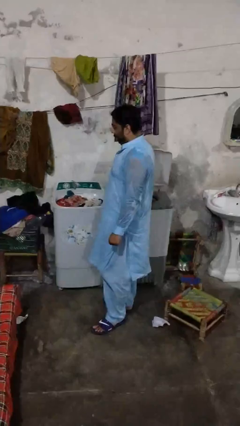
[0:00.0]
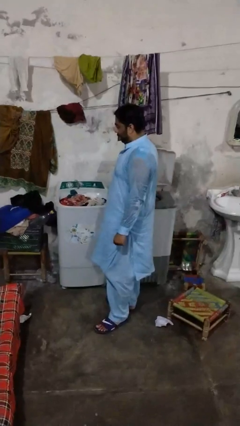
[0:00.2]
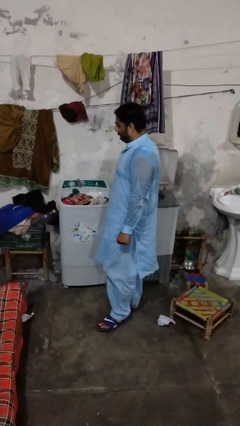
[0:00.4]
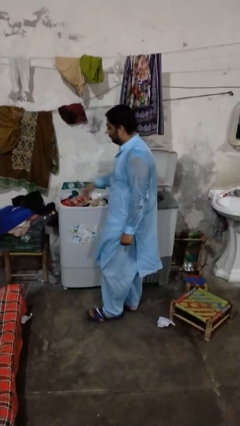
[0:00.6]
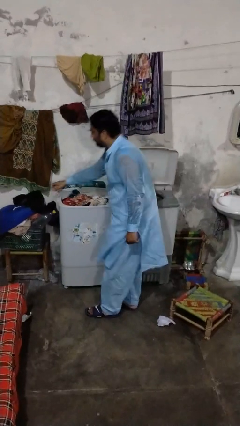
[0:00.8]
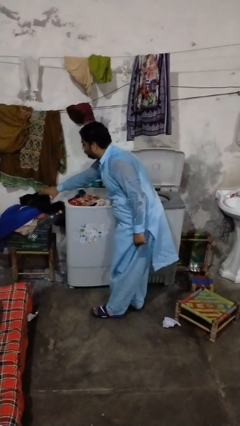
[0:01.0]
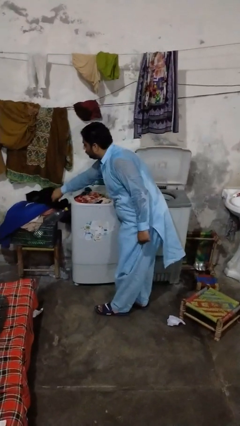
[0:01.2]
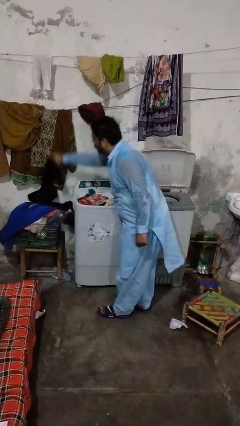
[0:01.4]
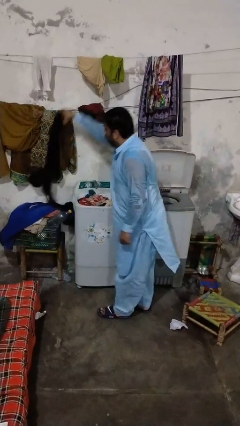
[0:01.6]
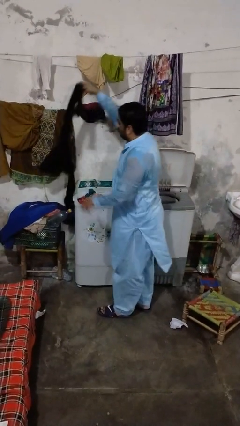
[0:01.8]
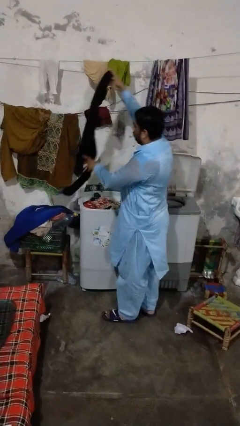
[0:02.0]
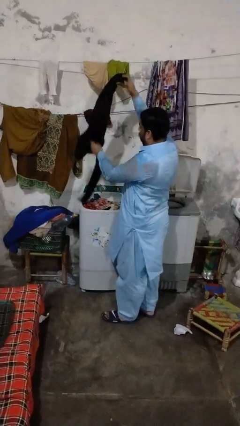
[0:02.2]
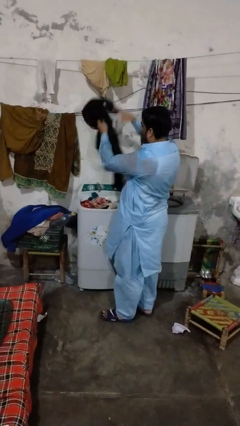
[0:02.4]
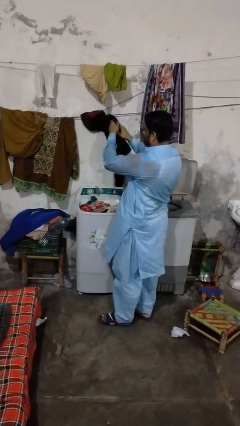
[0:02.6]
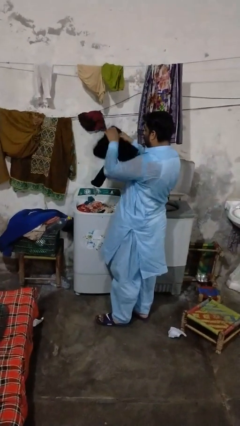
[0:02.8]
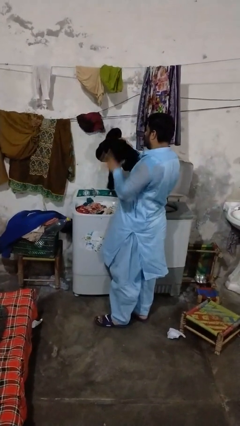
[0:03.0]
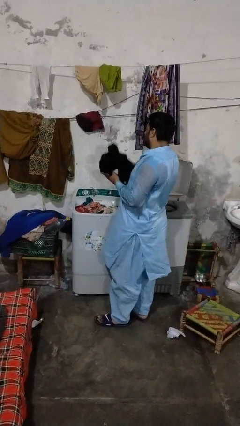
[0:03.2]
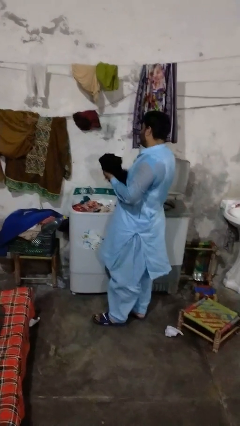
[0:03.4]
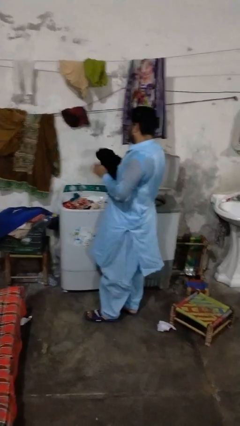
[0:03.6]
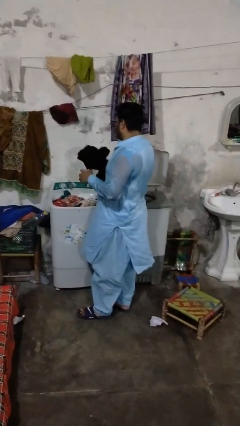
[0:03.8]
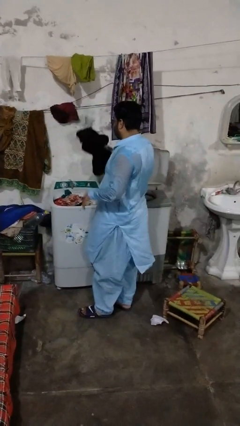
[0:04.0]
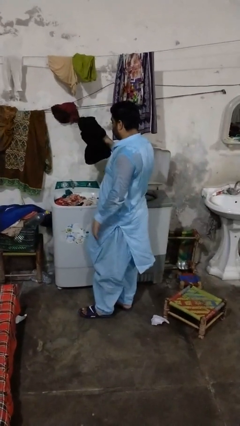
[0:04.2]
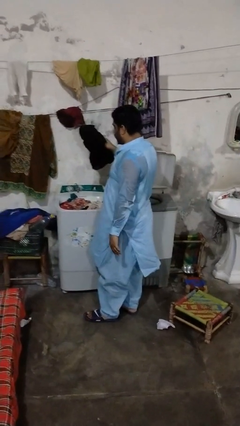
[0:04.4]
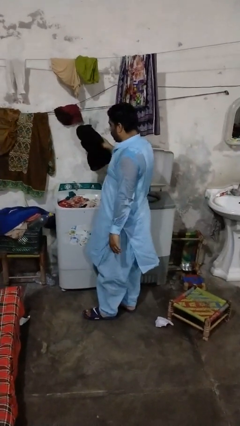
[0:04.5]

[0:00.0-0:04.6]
person loads clotheswasher

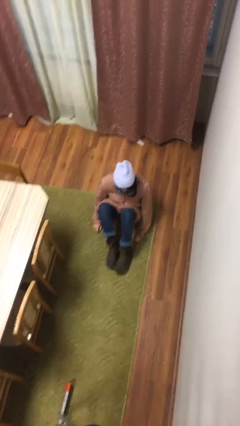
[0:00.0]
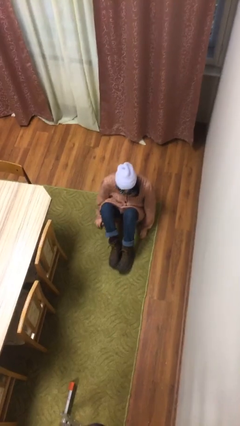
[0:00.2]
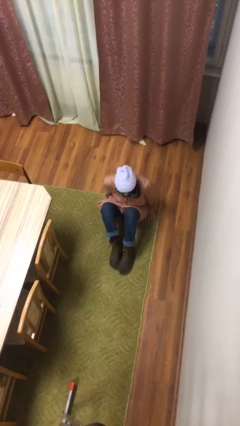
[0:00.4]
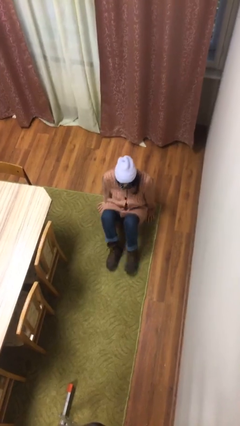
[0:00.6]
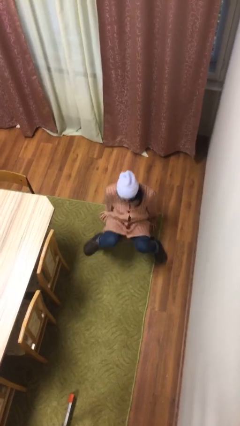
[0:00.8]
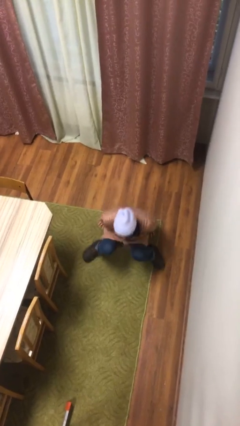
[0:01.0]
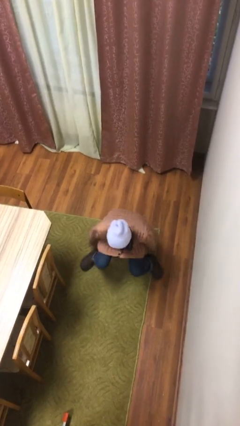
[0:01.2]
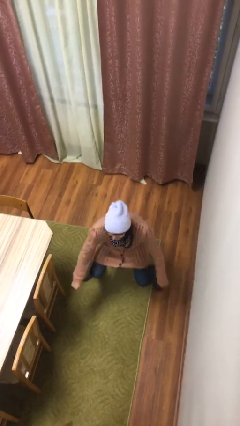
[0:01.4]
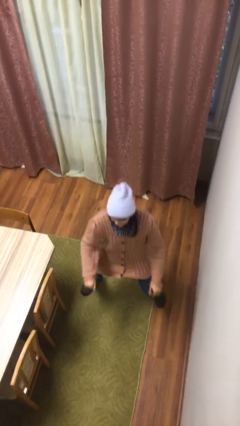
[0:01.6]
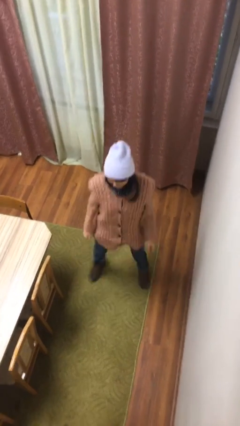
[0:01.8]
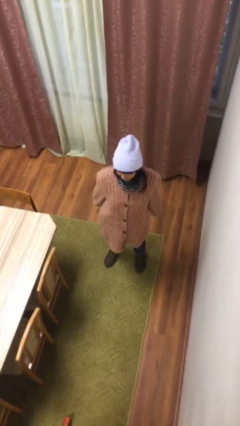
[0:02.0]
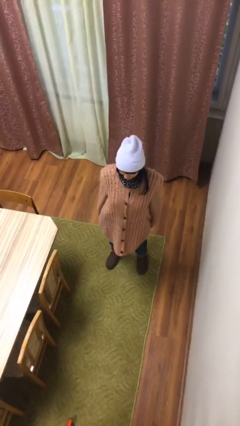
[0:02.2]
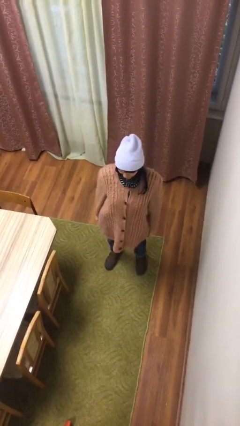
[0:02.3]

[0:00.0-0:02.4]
person stands up

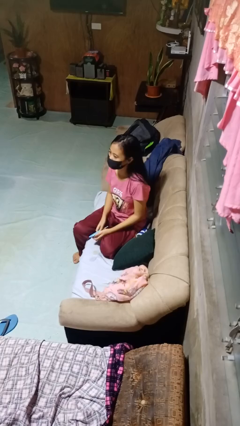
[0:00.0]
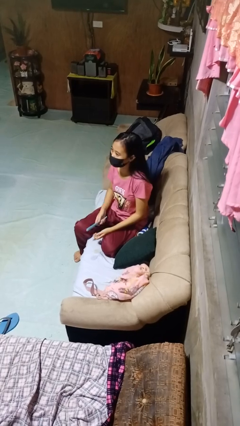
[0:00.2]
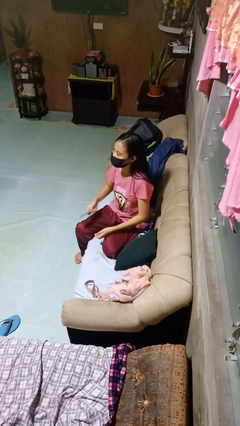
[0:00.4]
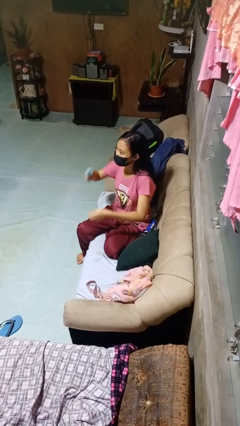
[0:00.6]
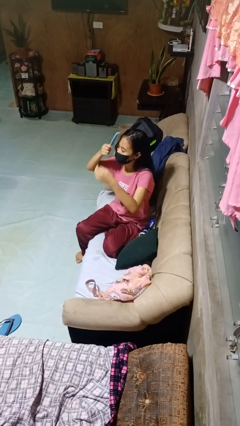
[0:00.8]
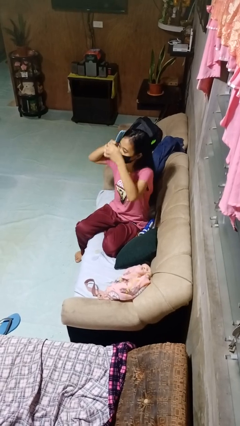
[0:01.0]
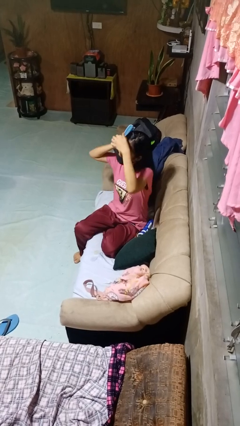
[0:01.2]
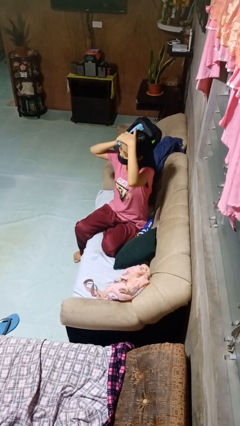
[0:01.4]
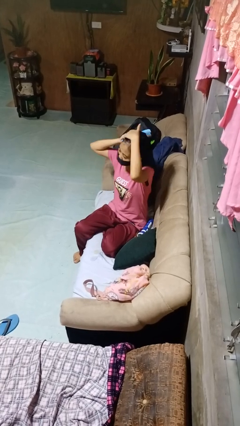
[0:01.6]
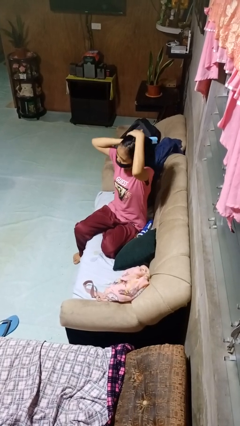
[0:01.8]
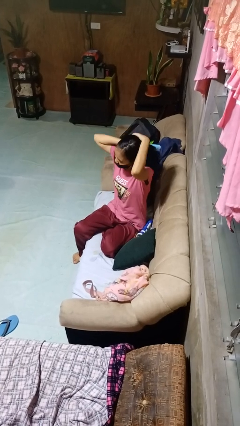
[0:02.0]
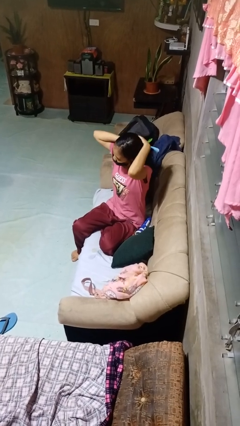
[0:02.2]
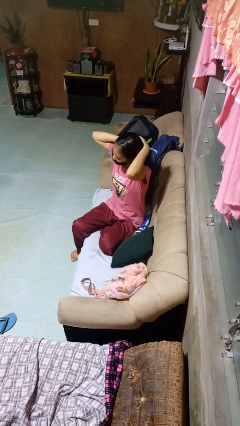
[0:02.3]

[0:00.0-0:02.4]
person brushes hair

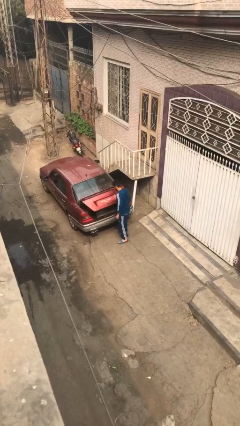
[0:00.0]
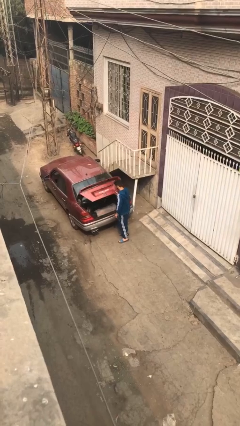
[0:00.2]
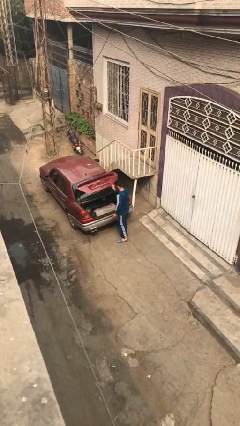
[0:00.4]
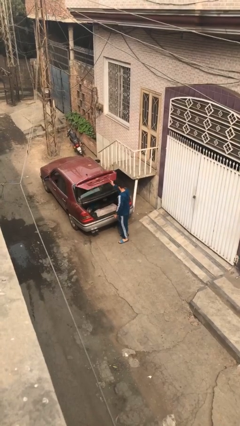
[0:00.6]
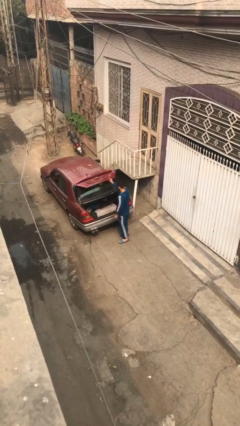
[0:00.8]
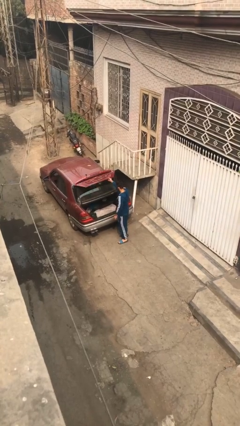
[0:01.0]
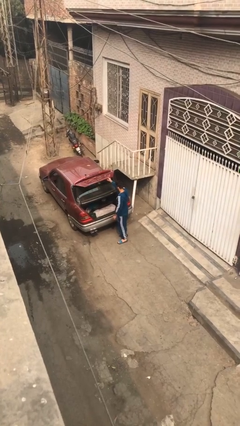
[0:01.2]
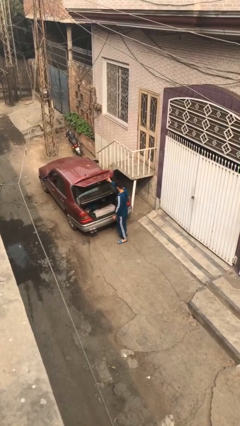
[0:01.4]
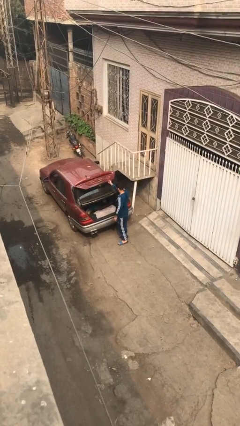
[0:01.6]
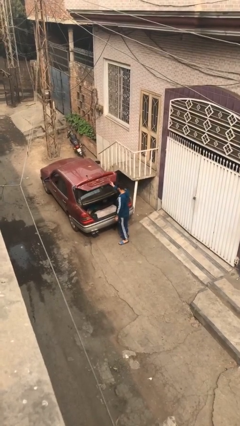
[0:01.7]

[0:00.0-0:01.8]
person opens car trunk

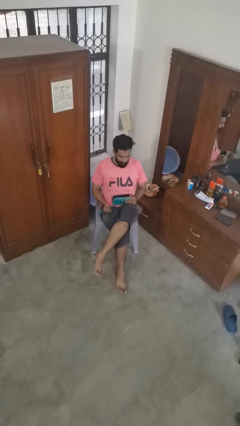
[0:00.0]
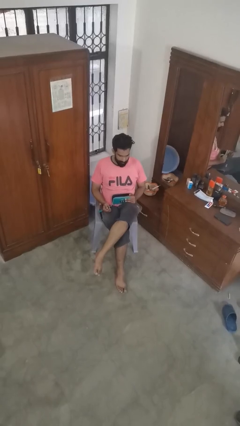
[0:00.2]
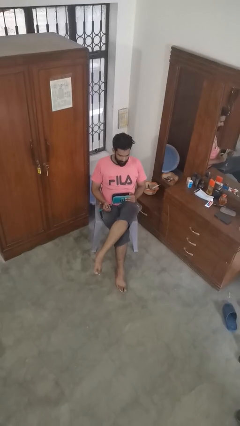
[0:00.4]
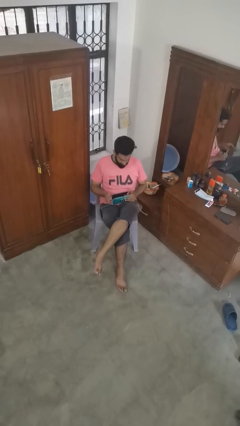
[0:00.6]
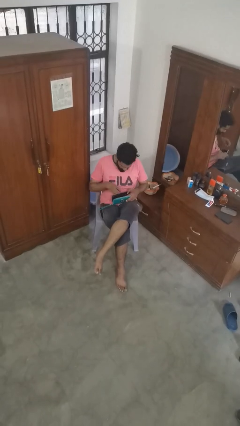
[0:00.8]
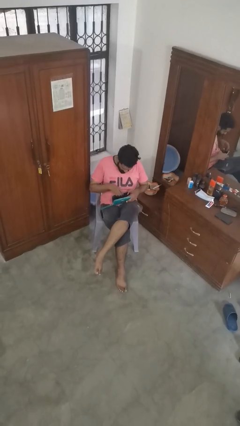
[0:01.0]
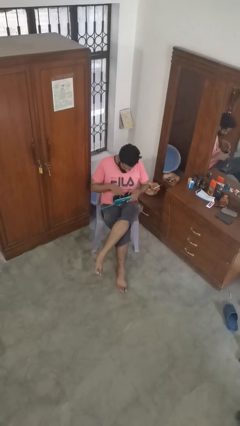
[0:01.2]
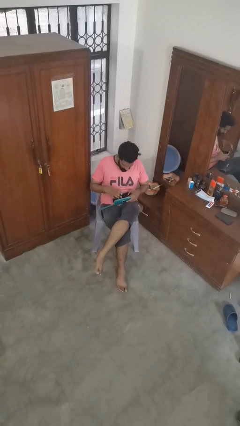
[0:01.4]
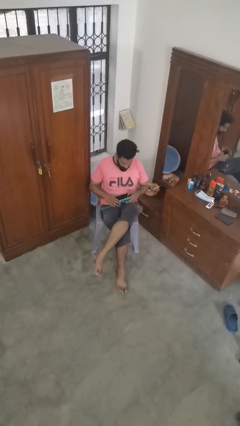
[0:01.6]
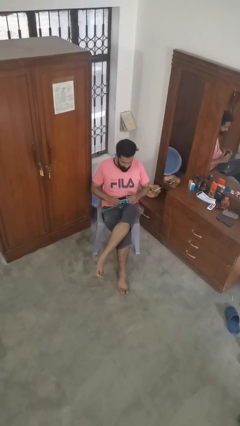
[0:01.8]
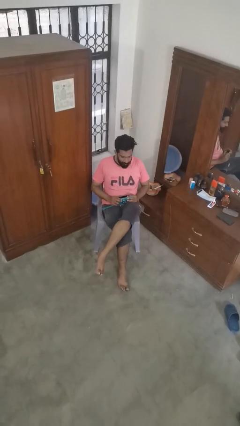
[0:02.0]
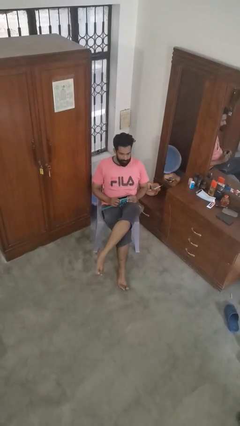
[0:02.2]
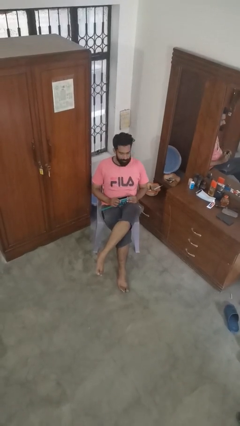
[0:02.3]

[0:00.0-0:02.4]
person puts object into purse

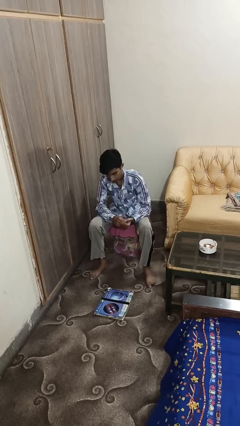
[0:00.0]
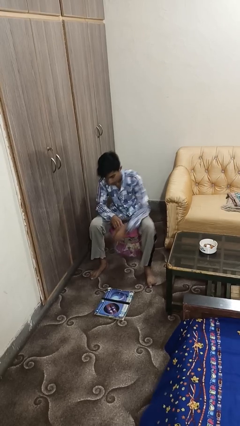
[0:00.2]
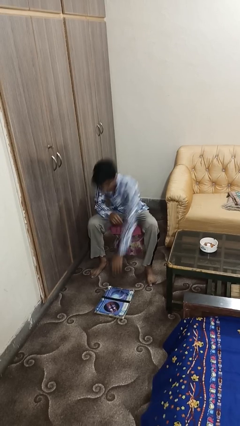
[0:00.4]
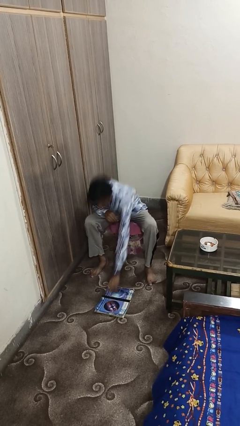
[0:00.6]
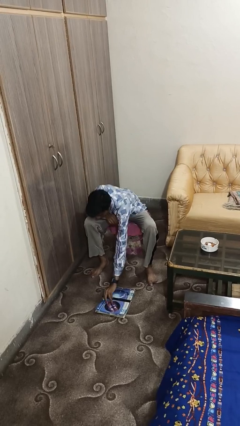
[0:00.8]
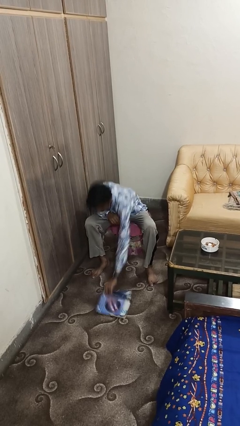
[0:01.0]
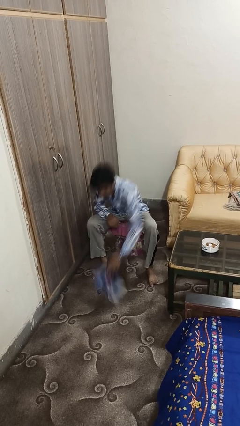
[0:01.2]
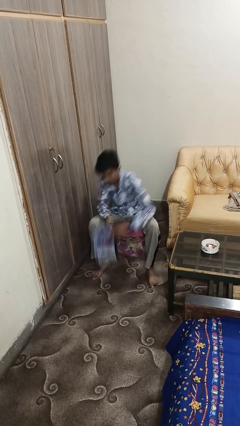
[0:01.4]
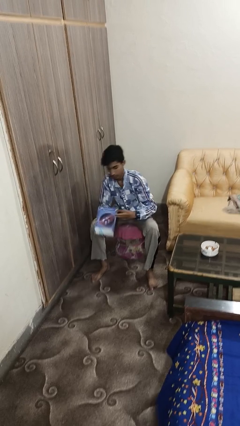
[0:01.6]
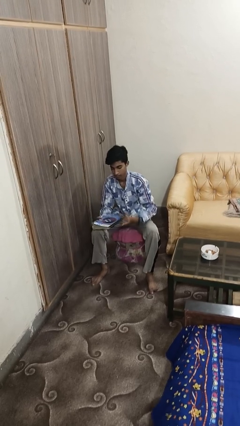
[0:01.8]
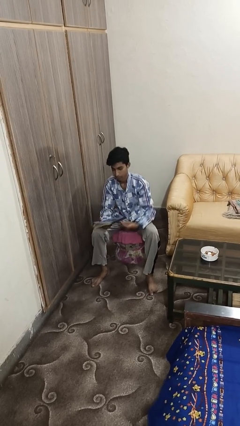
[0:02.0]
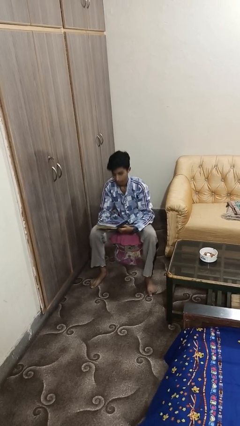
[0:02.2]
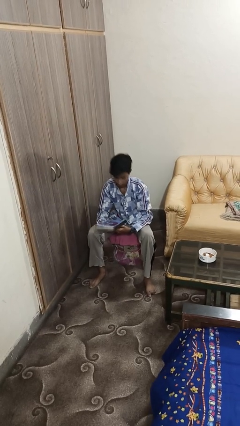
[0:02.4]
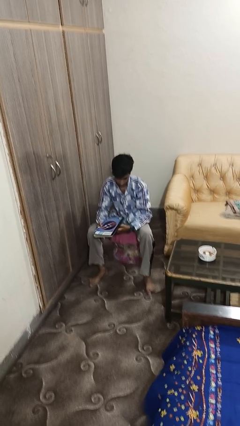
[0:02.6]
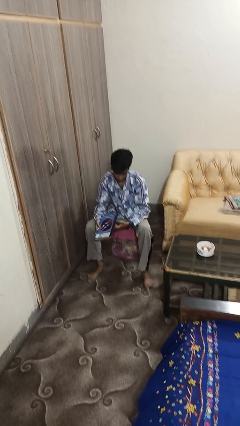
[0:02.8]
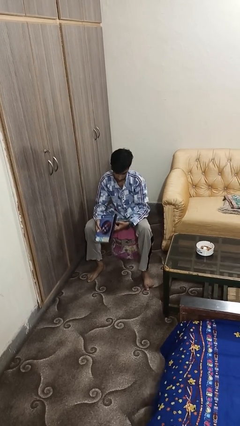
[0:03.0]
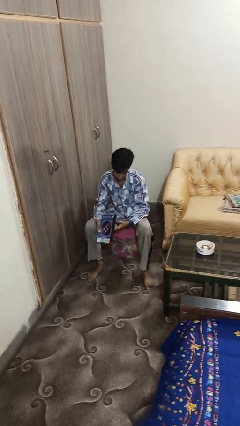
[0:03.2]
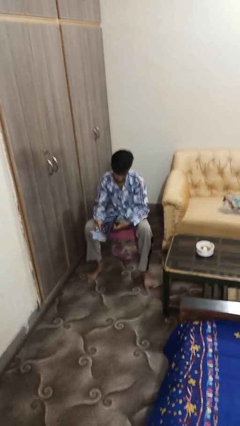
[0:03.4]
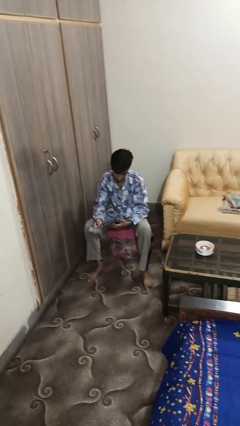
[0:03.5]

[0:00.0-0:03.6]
person picks up object from floor

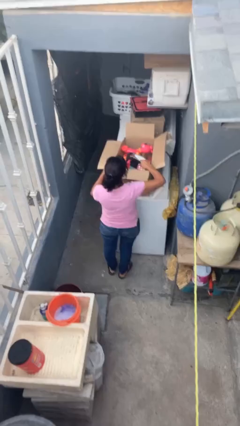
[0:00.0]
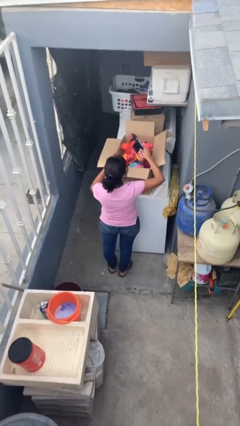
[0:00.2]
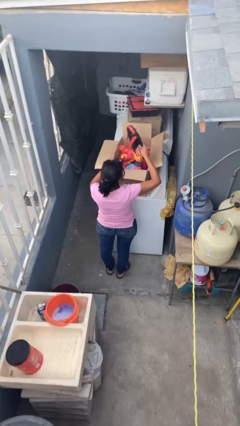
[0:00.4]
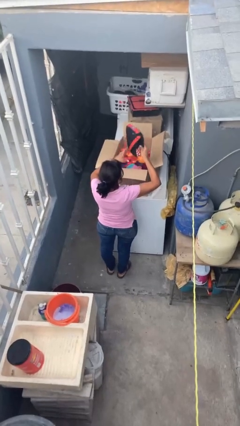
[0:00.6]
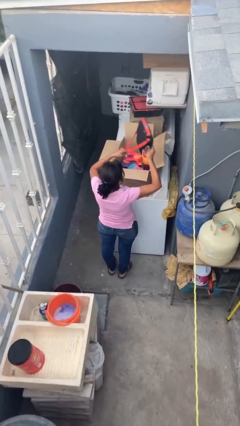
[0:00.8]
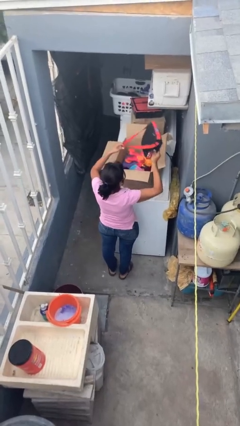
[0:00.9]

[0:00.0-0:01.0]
person takes object from box
